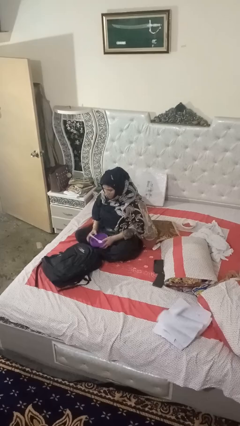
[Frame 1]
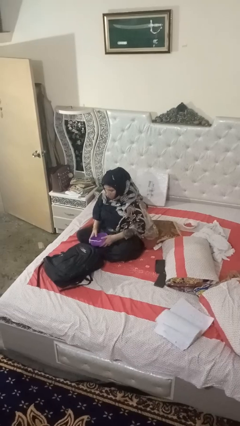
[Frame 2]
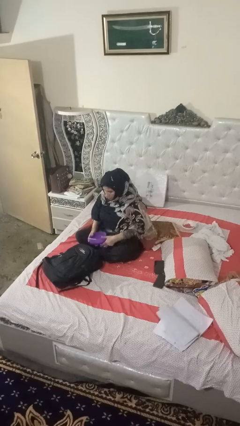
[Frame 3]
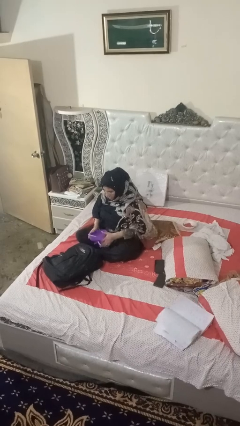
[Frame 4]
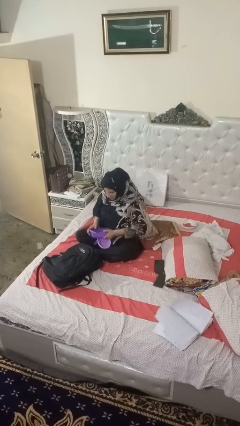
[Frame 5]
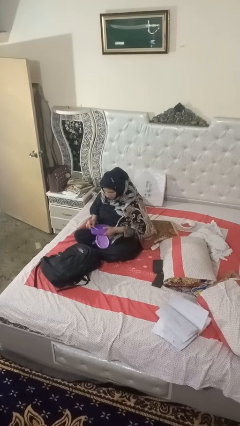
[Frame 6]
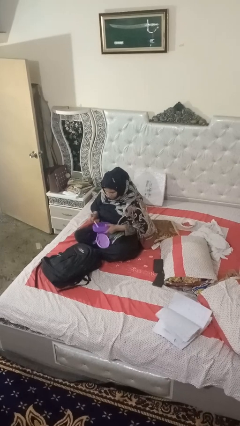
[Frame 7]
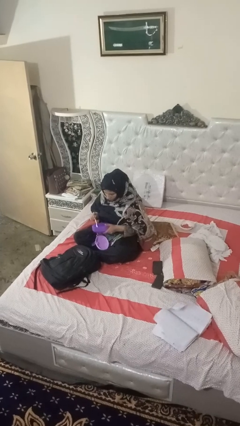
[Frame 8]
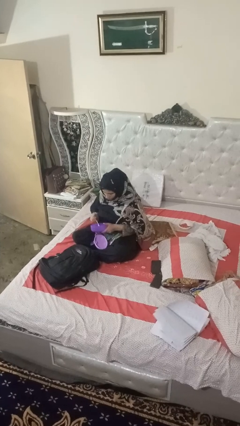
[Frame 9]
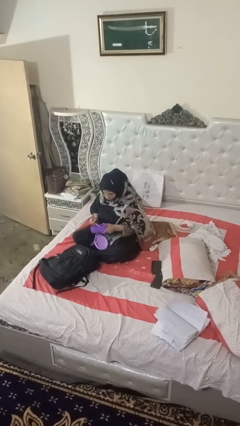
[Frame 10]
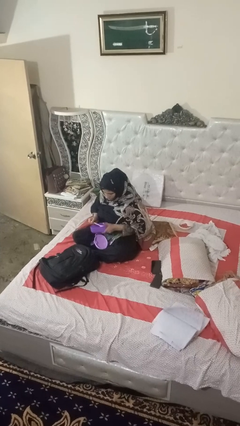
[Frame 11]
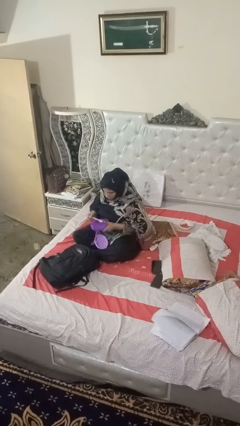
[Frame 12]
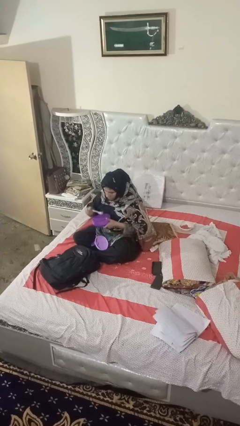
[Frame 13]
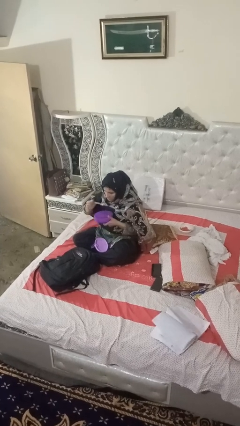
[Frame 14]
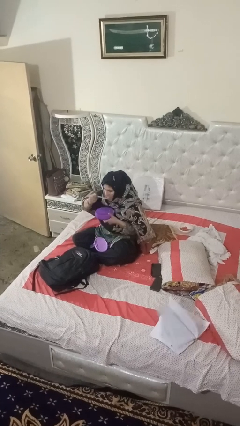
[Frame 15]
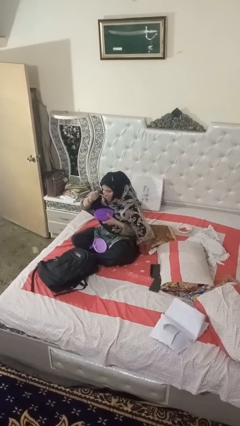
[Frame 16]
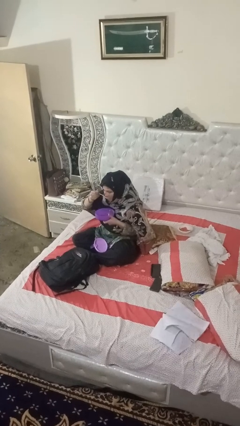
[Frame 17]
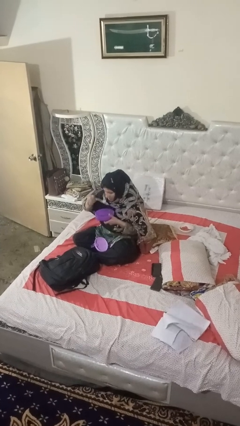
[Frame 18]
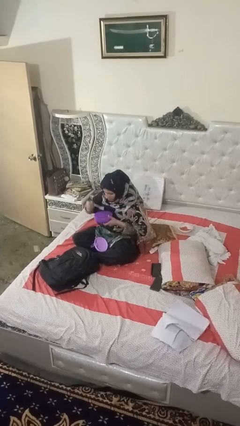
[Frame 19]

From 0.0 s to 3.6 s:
person eats snack from bag

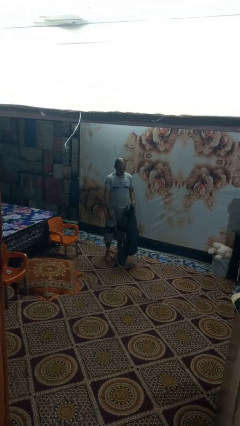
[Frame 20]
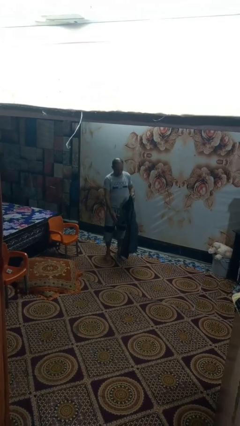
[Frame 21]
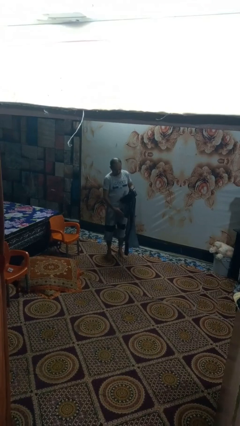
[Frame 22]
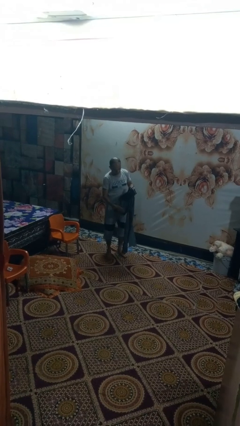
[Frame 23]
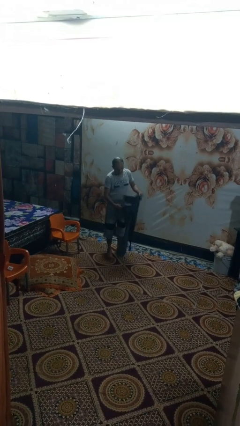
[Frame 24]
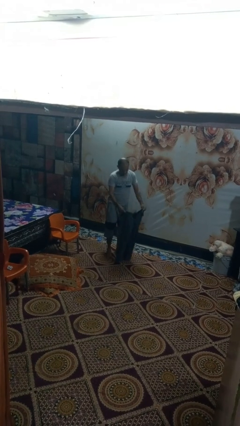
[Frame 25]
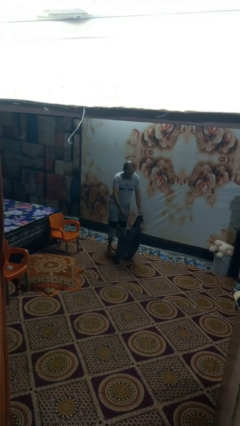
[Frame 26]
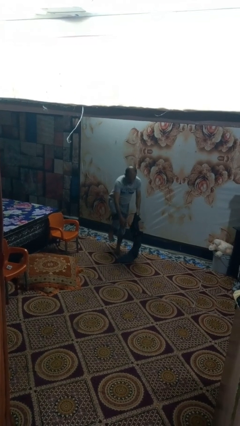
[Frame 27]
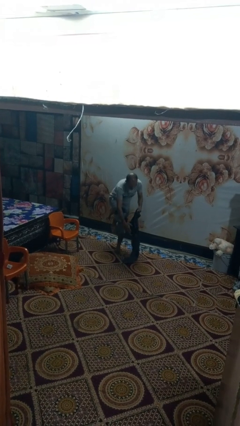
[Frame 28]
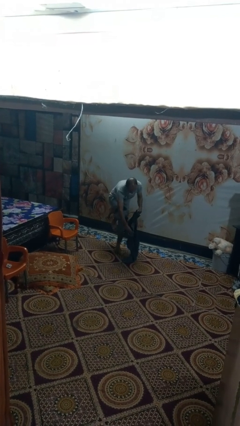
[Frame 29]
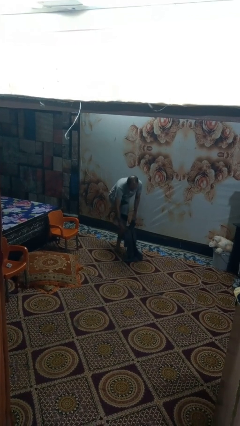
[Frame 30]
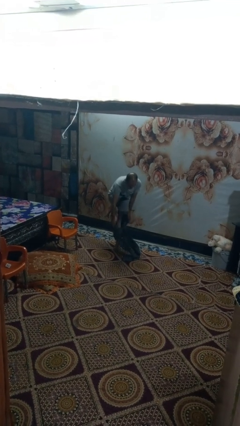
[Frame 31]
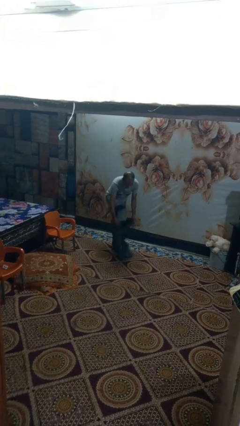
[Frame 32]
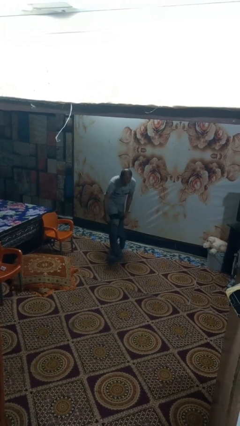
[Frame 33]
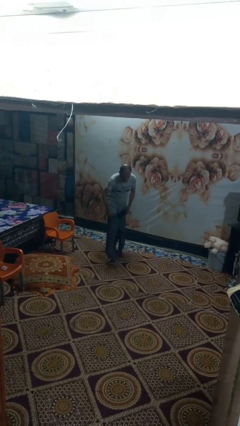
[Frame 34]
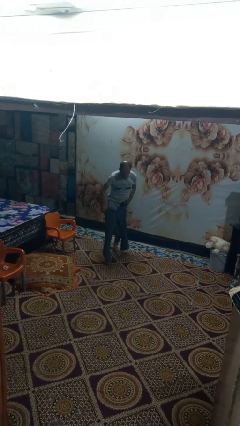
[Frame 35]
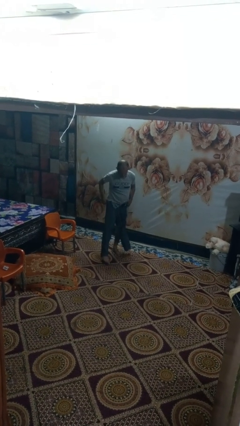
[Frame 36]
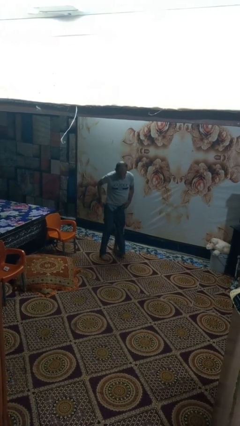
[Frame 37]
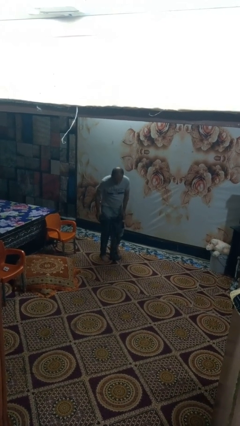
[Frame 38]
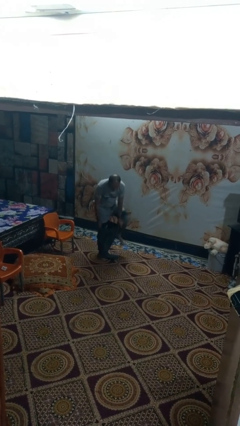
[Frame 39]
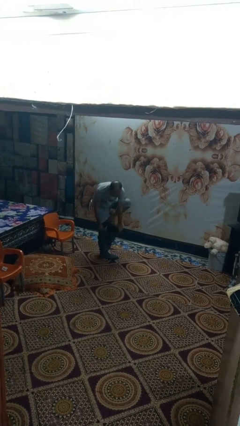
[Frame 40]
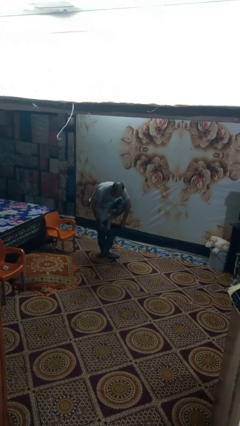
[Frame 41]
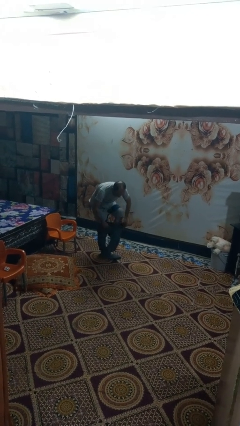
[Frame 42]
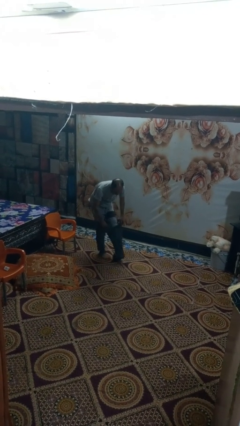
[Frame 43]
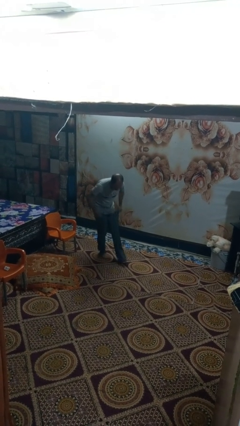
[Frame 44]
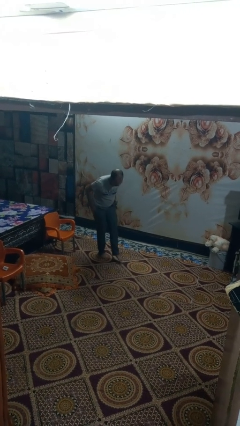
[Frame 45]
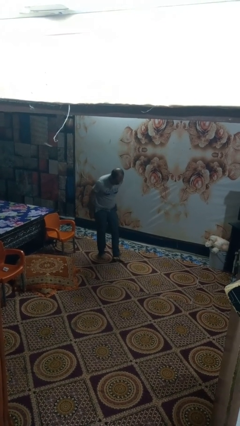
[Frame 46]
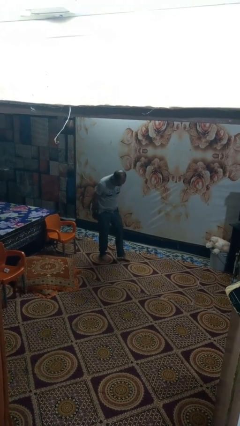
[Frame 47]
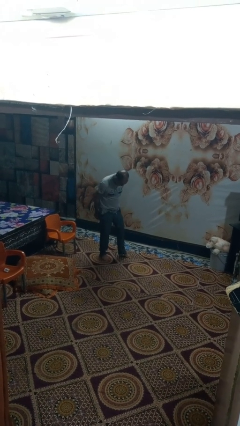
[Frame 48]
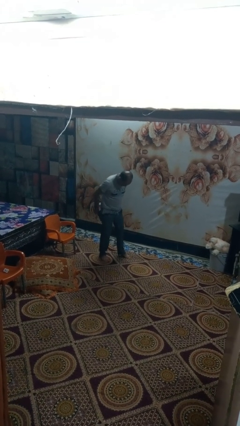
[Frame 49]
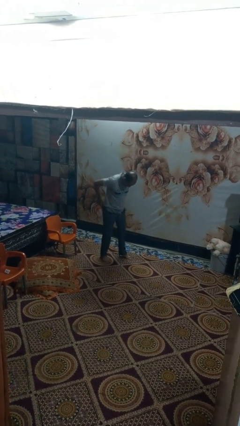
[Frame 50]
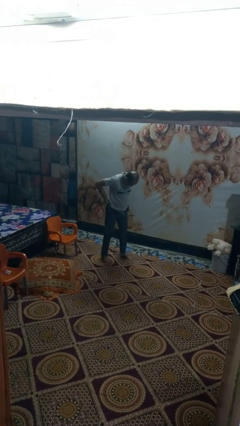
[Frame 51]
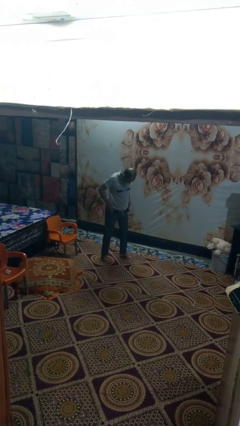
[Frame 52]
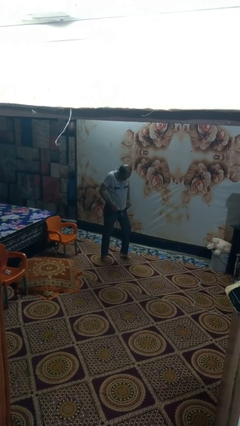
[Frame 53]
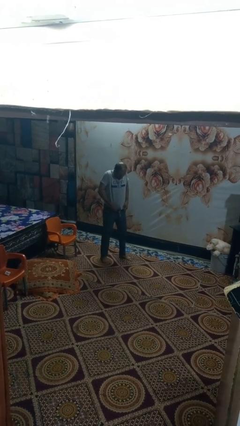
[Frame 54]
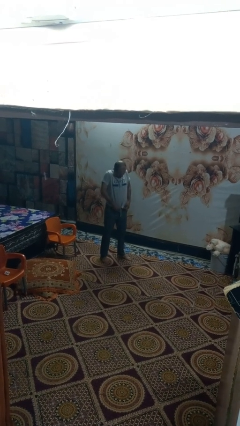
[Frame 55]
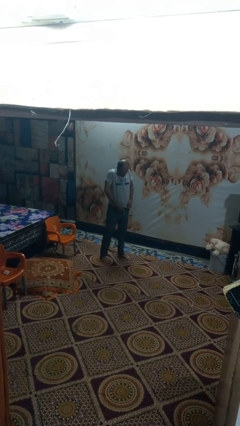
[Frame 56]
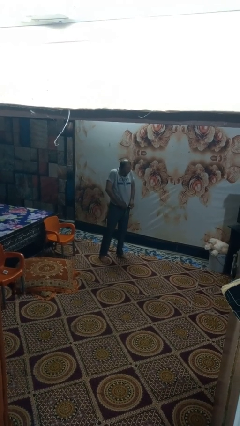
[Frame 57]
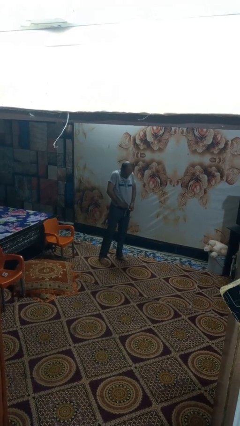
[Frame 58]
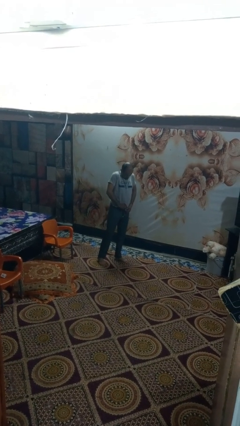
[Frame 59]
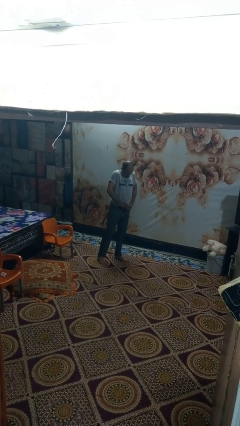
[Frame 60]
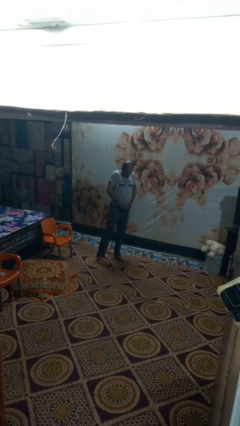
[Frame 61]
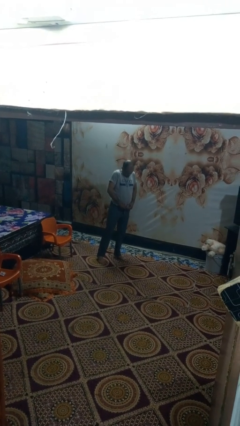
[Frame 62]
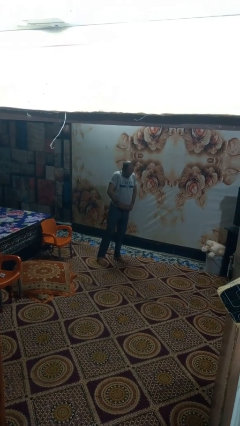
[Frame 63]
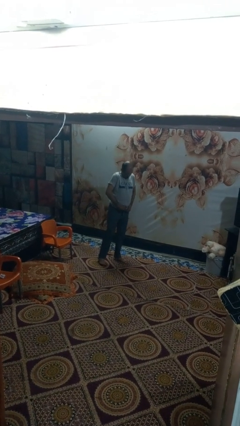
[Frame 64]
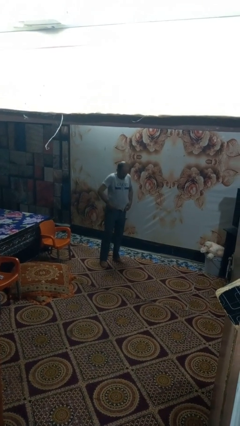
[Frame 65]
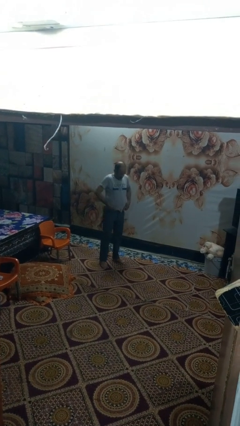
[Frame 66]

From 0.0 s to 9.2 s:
person puts on pants

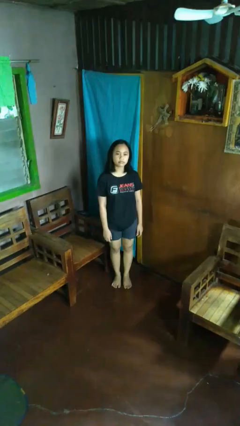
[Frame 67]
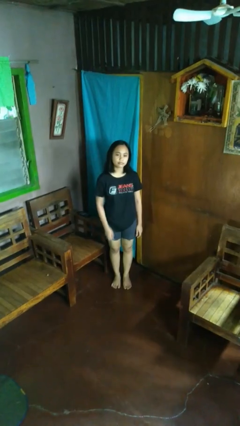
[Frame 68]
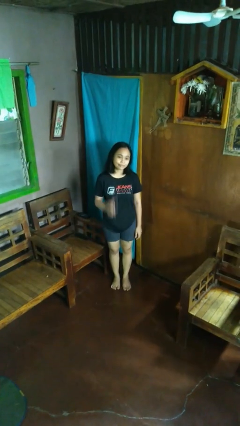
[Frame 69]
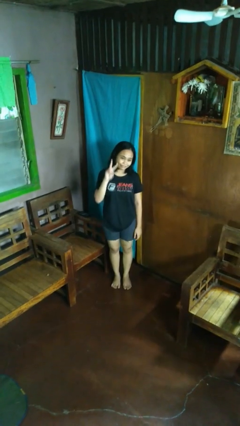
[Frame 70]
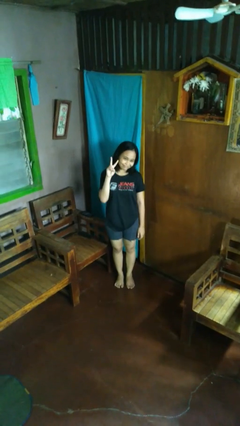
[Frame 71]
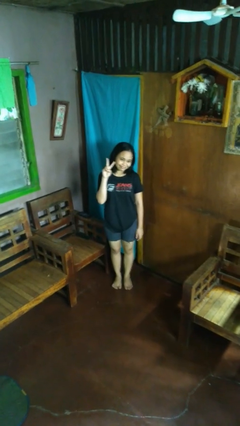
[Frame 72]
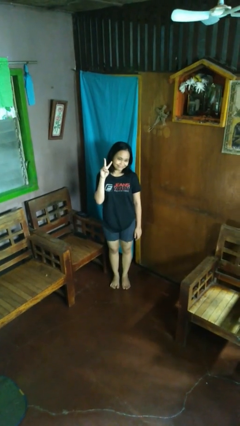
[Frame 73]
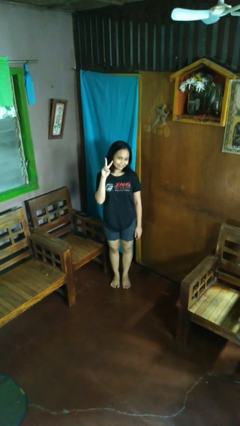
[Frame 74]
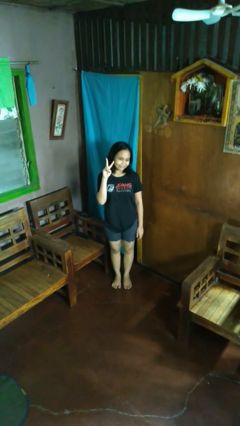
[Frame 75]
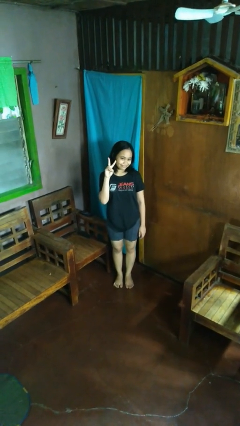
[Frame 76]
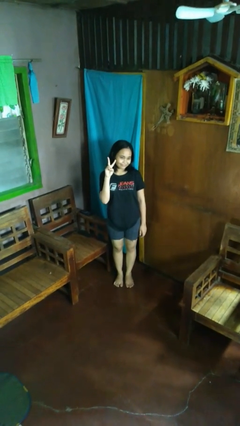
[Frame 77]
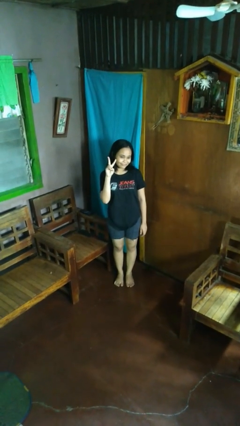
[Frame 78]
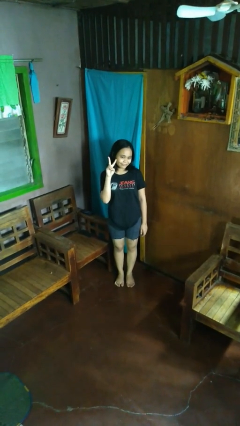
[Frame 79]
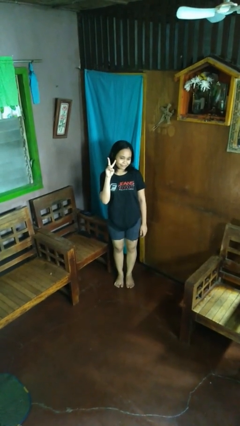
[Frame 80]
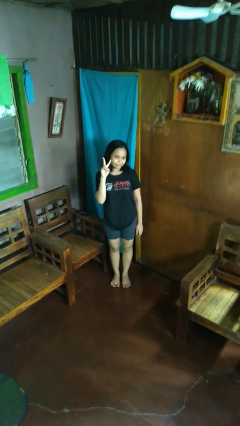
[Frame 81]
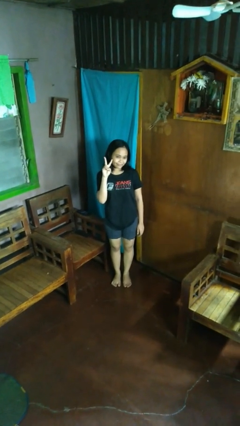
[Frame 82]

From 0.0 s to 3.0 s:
person gestures peace

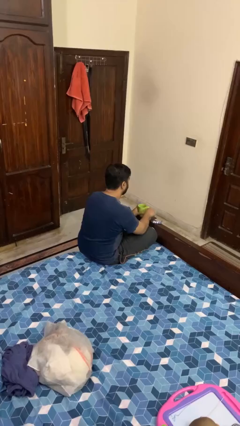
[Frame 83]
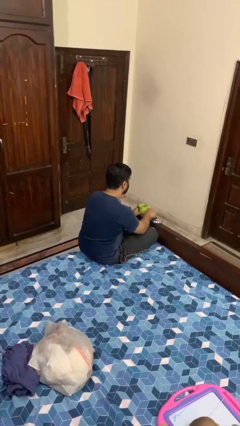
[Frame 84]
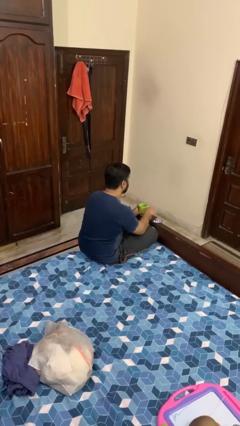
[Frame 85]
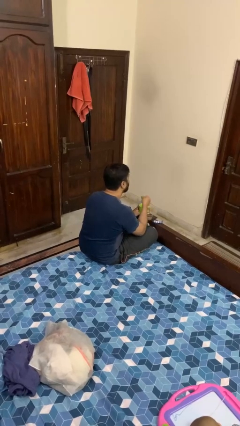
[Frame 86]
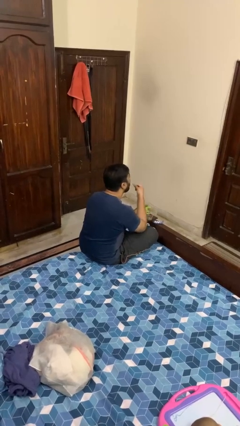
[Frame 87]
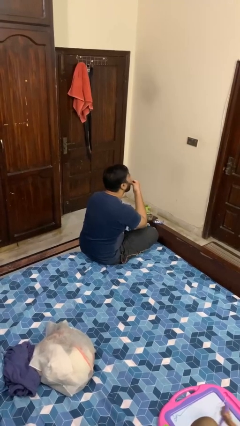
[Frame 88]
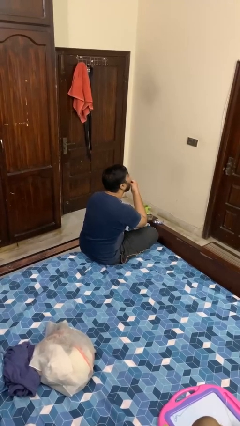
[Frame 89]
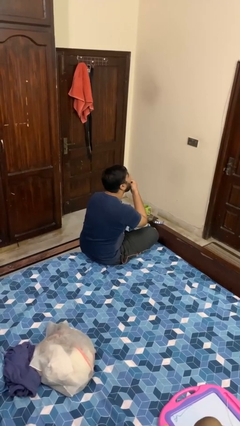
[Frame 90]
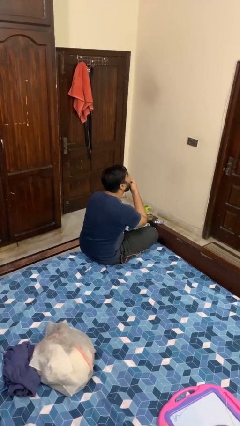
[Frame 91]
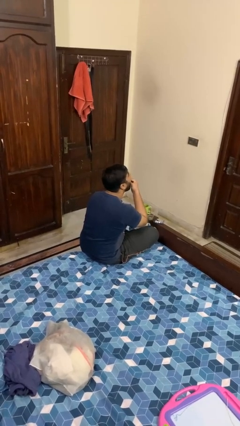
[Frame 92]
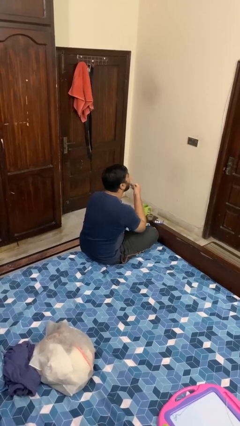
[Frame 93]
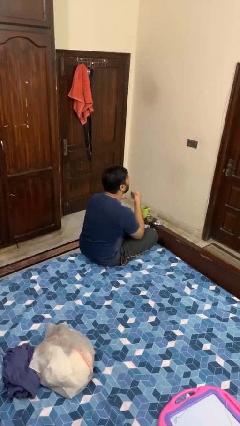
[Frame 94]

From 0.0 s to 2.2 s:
person takes medicine pills
